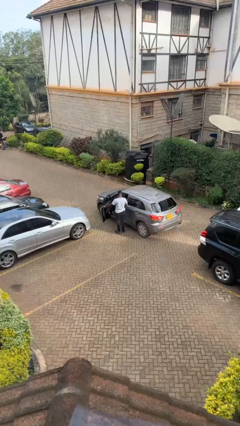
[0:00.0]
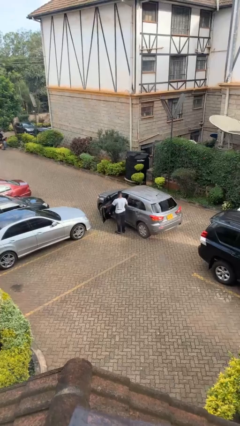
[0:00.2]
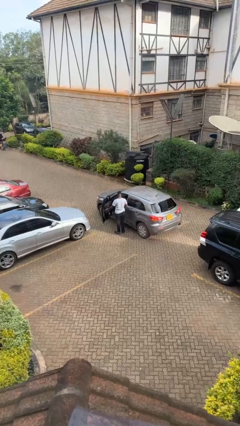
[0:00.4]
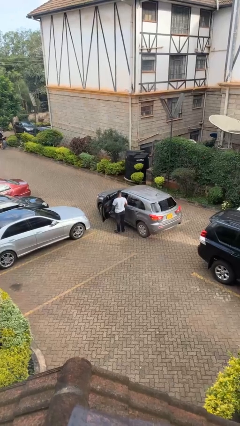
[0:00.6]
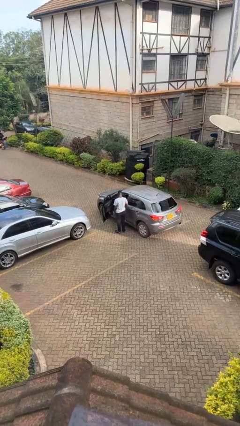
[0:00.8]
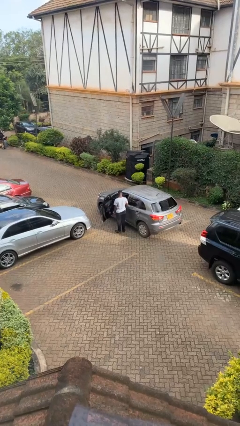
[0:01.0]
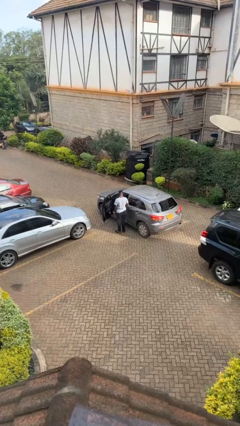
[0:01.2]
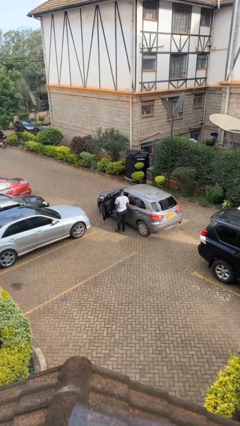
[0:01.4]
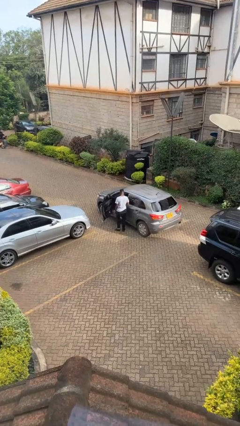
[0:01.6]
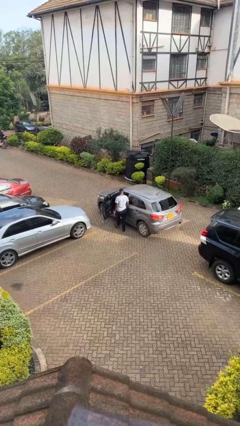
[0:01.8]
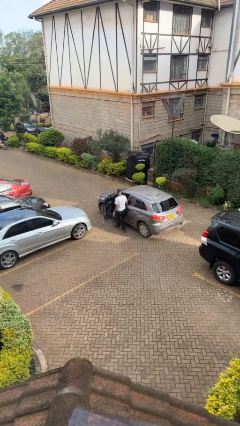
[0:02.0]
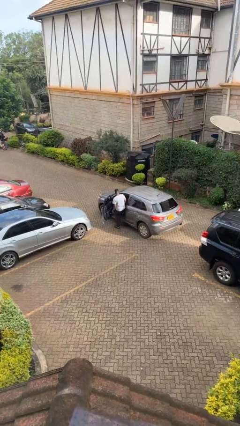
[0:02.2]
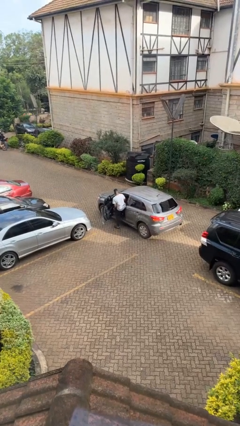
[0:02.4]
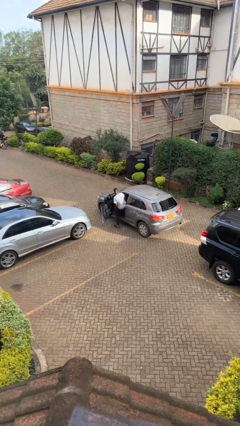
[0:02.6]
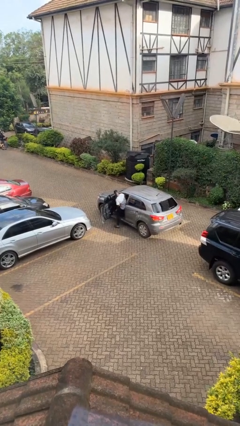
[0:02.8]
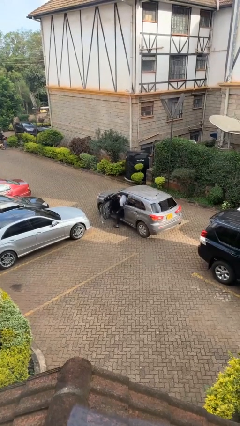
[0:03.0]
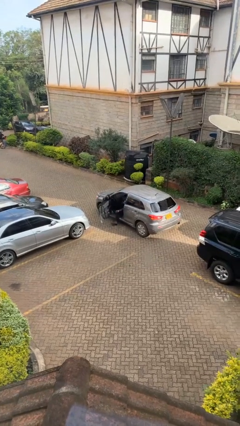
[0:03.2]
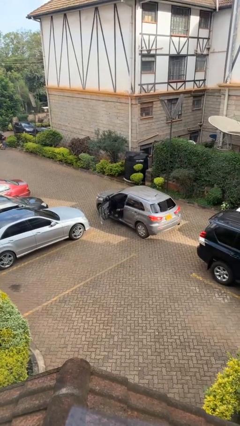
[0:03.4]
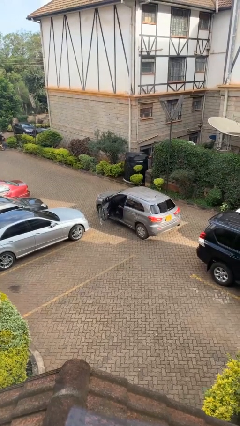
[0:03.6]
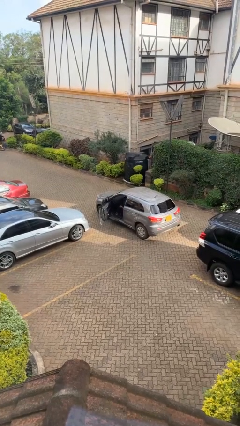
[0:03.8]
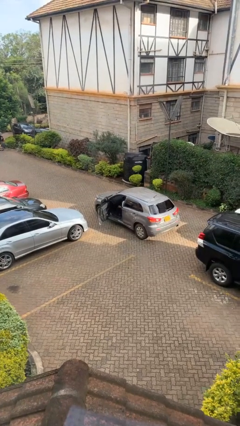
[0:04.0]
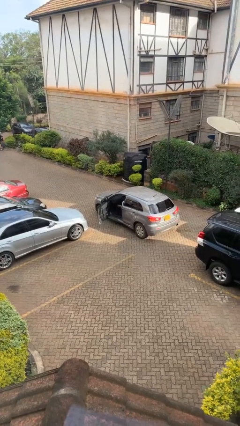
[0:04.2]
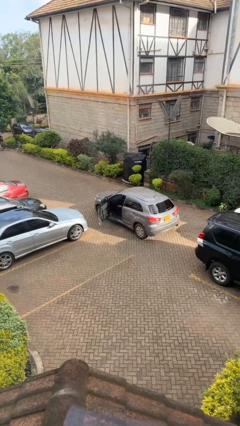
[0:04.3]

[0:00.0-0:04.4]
person enters car

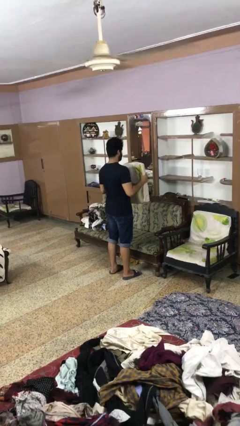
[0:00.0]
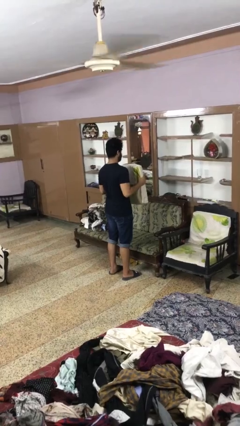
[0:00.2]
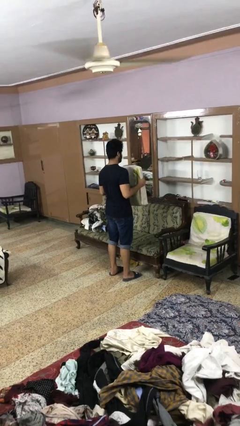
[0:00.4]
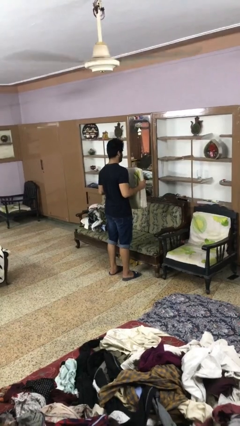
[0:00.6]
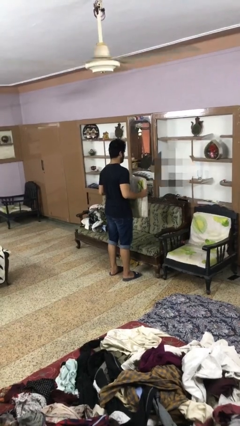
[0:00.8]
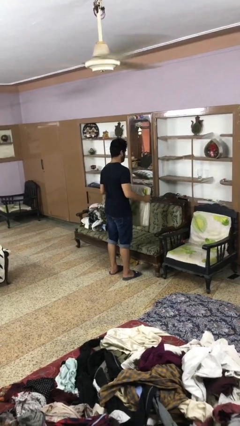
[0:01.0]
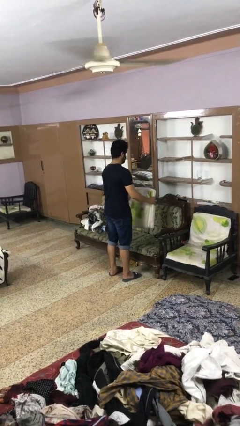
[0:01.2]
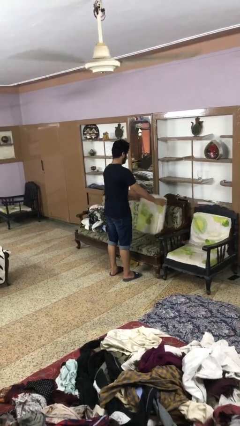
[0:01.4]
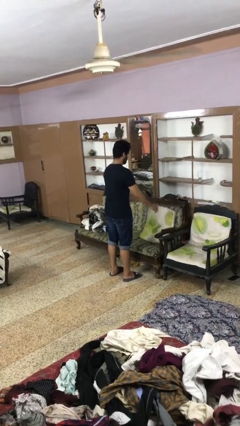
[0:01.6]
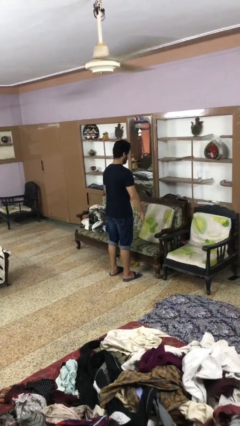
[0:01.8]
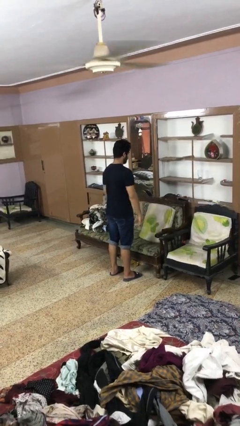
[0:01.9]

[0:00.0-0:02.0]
person puts down object on couch

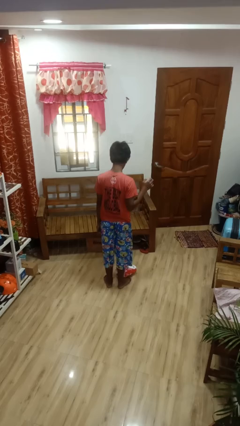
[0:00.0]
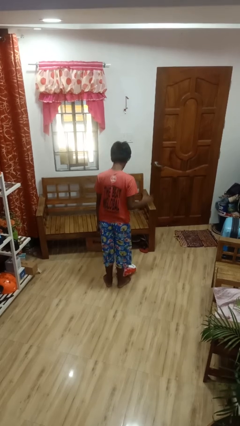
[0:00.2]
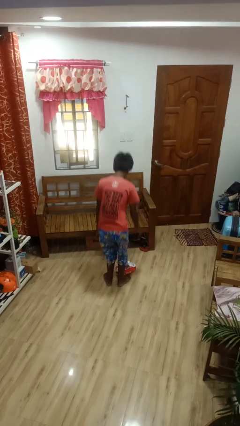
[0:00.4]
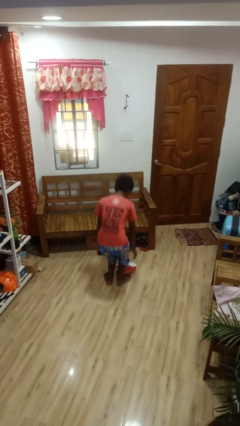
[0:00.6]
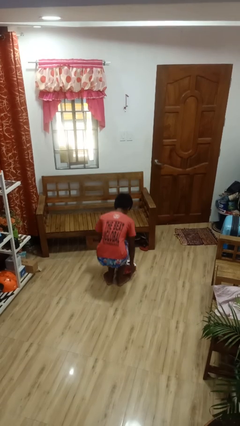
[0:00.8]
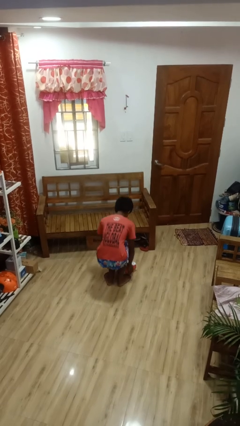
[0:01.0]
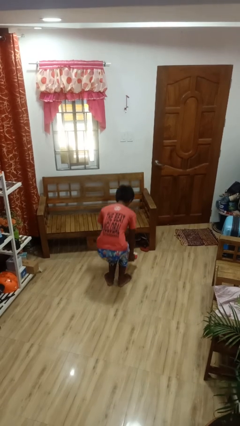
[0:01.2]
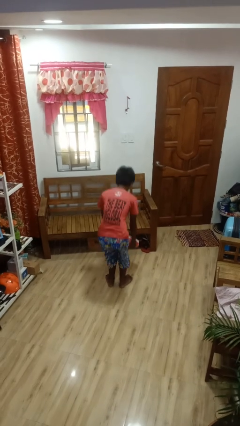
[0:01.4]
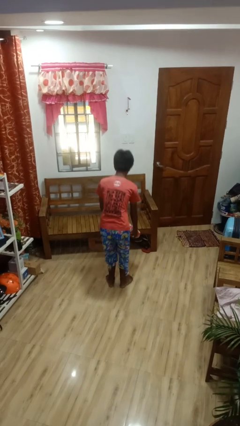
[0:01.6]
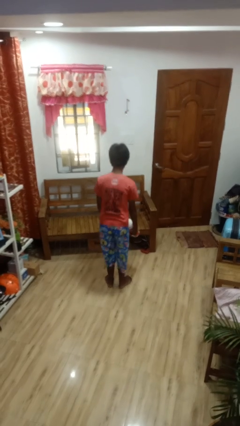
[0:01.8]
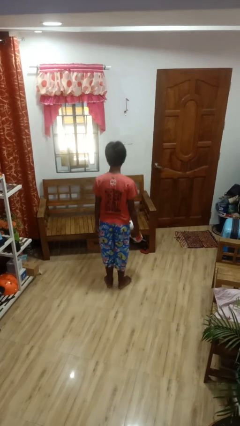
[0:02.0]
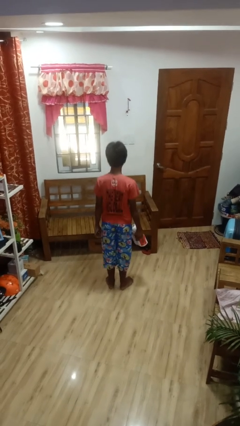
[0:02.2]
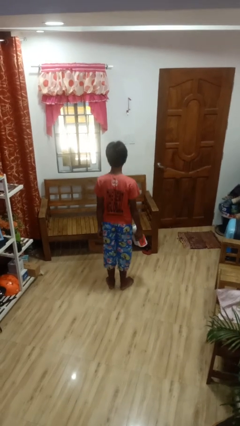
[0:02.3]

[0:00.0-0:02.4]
person picks up object from floor

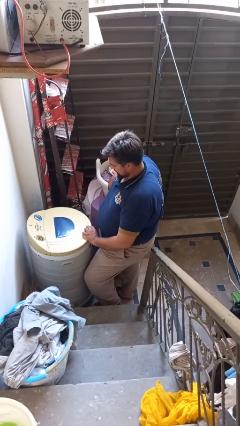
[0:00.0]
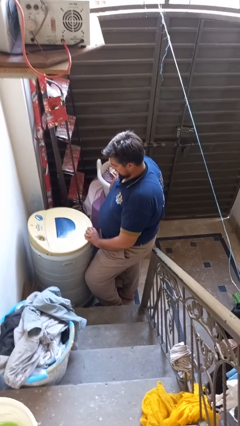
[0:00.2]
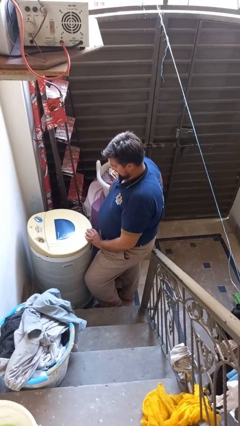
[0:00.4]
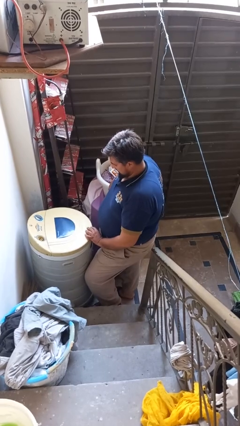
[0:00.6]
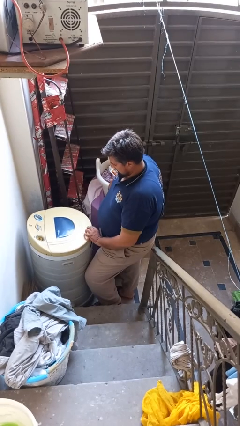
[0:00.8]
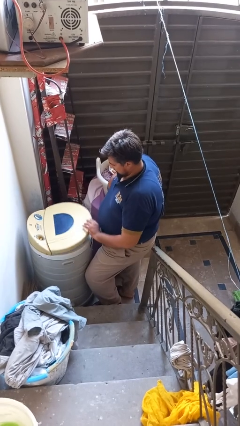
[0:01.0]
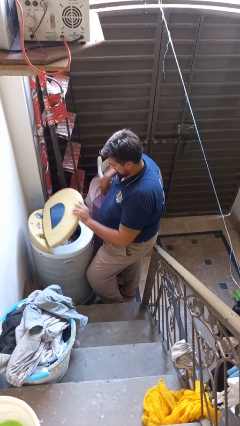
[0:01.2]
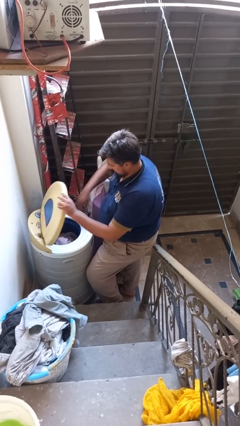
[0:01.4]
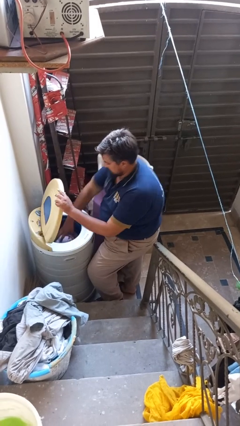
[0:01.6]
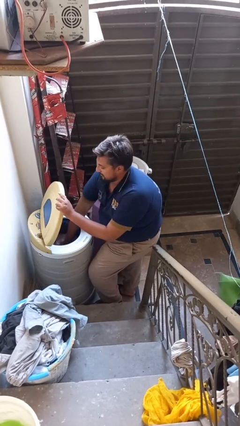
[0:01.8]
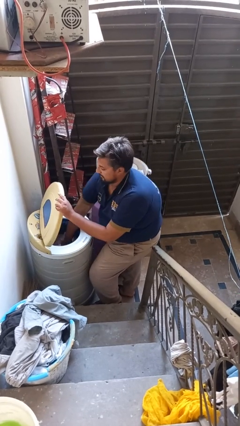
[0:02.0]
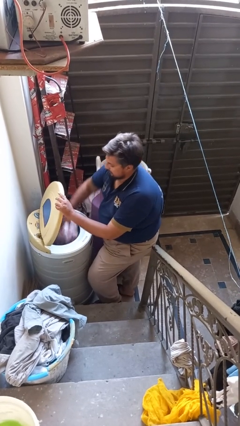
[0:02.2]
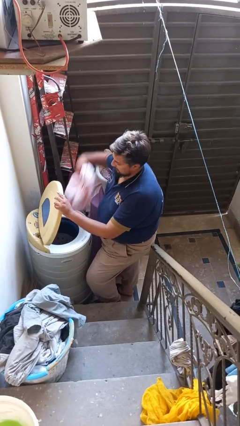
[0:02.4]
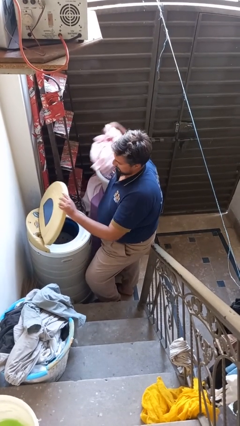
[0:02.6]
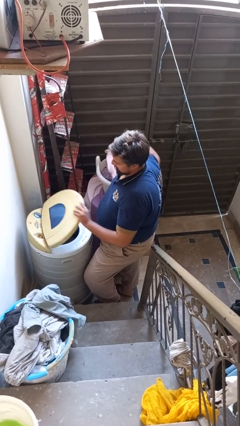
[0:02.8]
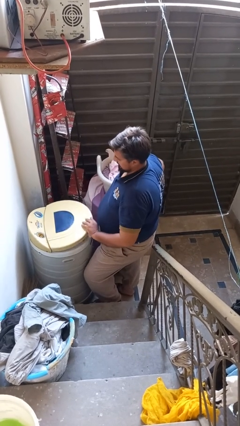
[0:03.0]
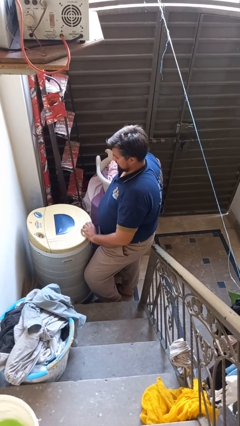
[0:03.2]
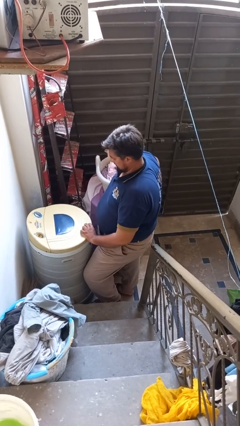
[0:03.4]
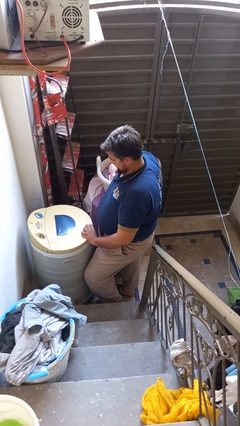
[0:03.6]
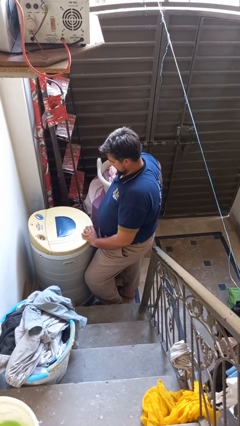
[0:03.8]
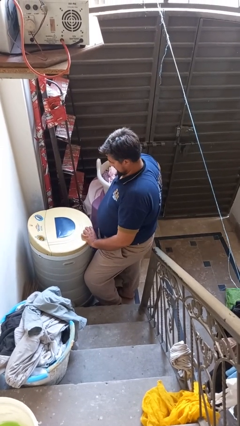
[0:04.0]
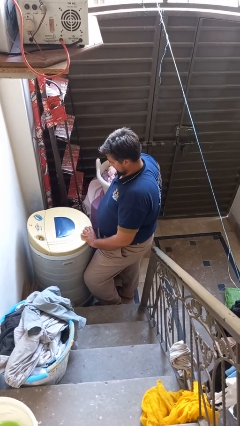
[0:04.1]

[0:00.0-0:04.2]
person unloads dryer

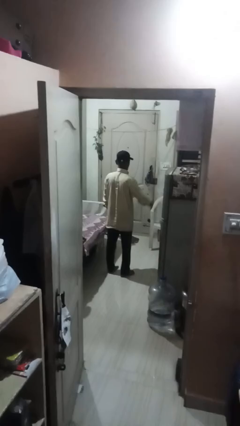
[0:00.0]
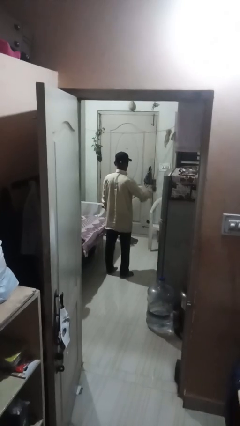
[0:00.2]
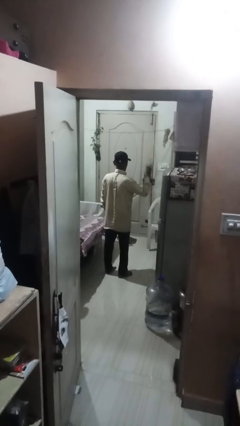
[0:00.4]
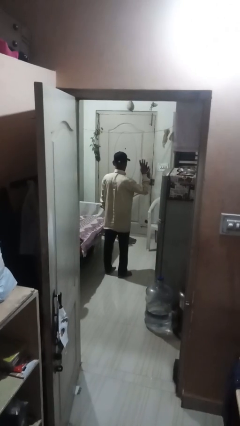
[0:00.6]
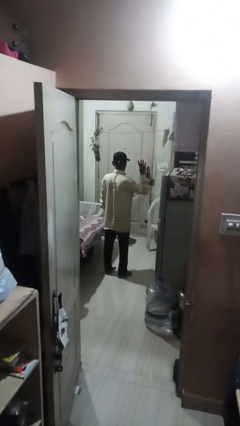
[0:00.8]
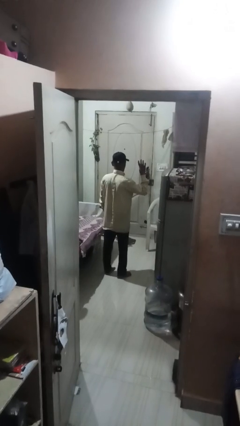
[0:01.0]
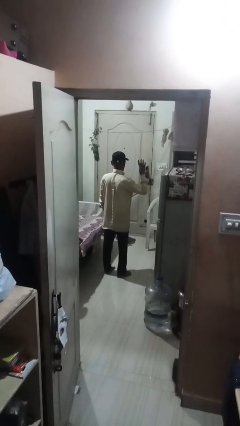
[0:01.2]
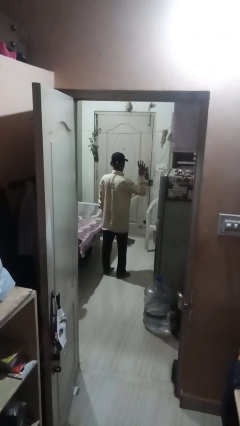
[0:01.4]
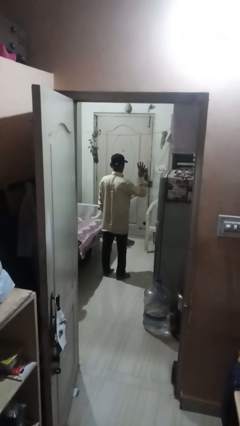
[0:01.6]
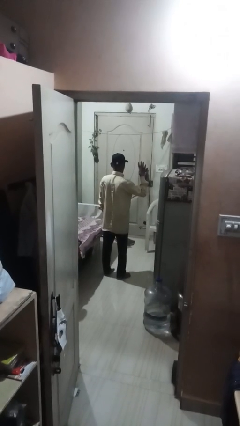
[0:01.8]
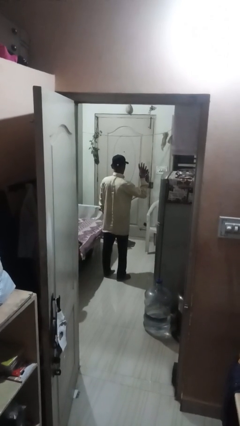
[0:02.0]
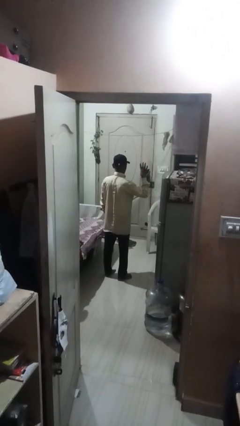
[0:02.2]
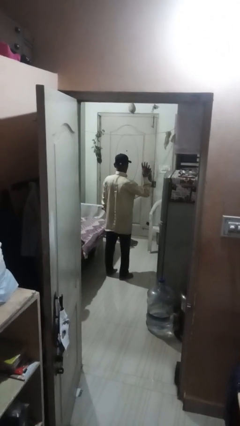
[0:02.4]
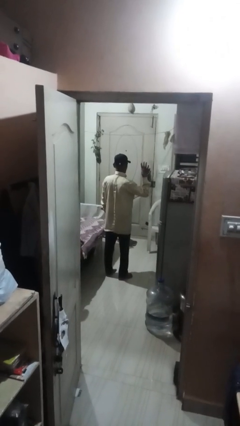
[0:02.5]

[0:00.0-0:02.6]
person gestures number four

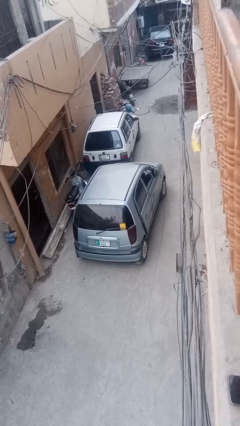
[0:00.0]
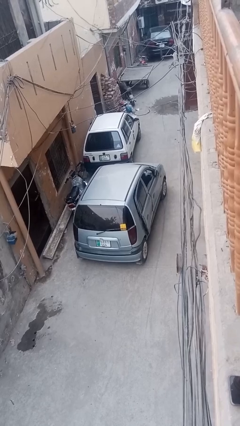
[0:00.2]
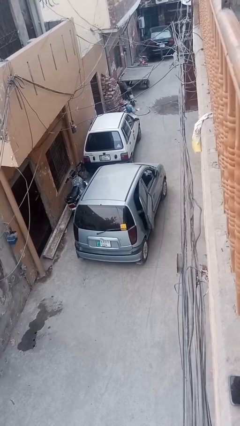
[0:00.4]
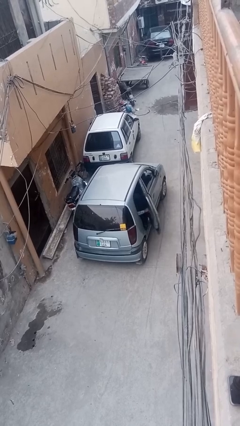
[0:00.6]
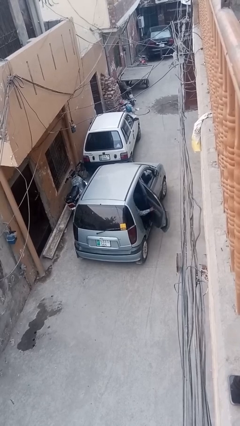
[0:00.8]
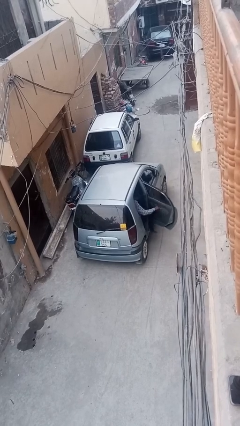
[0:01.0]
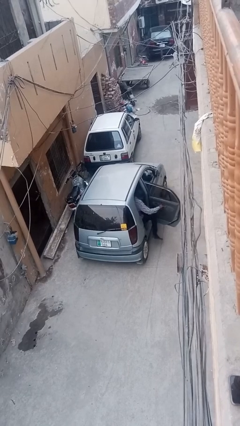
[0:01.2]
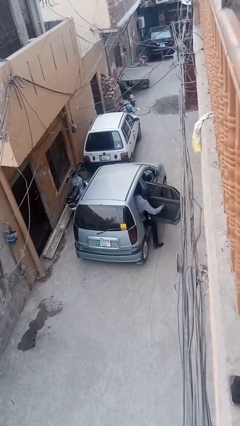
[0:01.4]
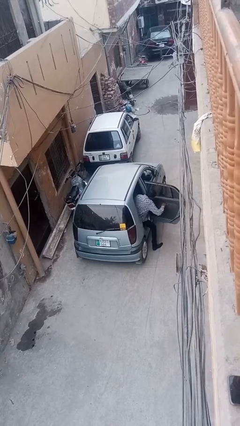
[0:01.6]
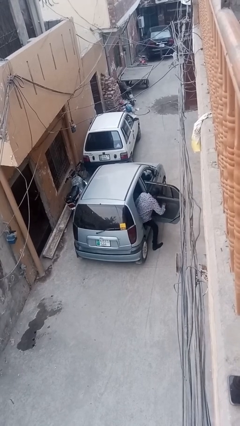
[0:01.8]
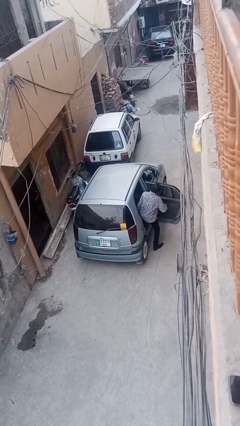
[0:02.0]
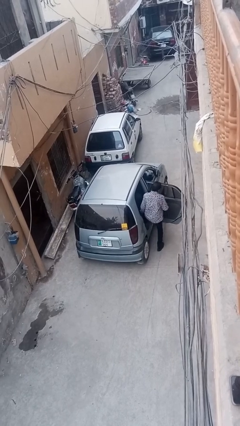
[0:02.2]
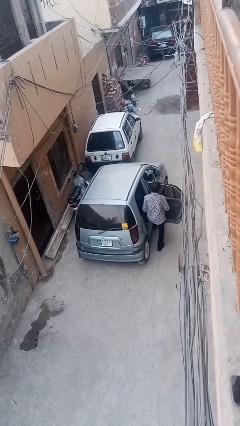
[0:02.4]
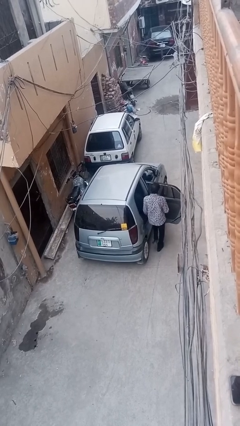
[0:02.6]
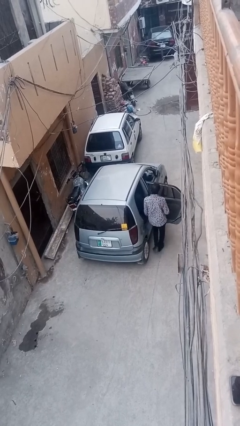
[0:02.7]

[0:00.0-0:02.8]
car drops off person
